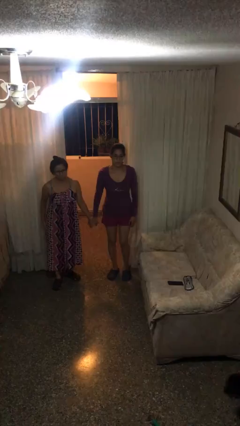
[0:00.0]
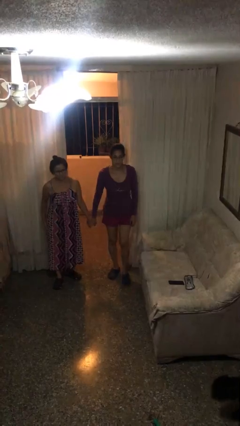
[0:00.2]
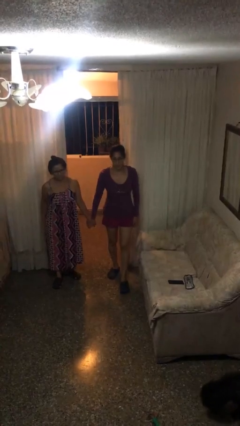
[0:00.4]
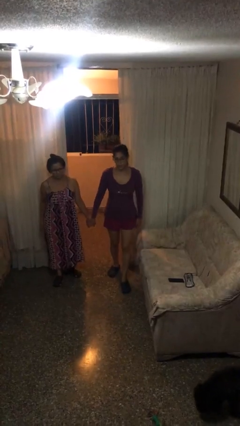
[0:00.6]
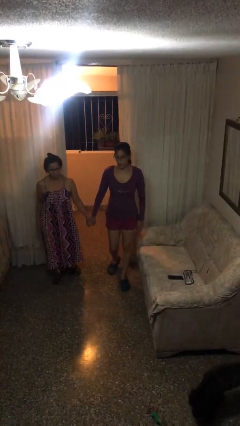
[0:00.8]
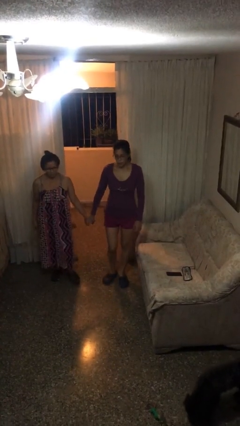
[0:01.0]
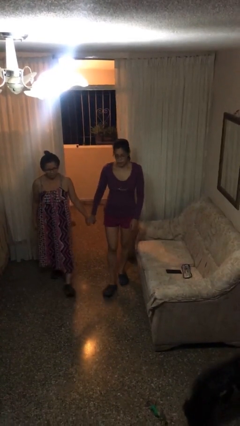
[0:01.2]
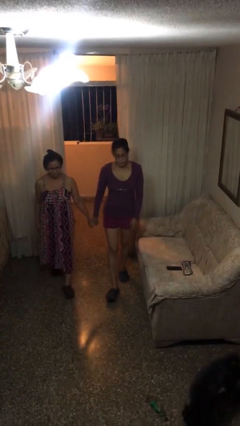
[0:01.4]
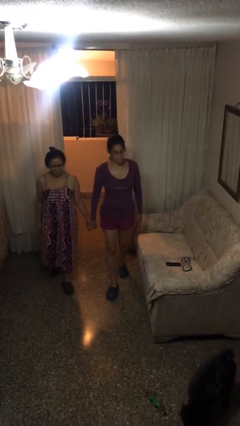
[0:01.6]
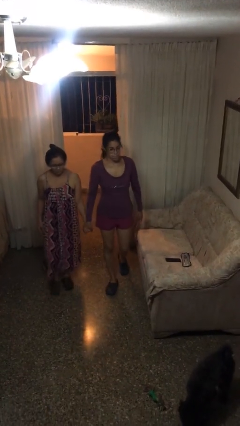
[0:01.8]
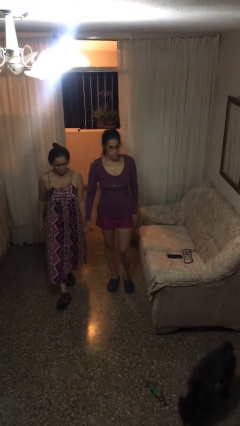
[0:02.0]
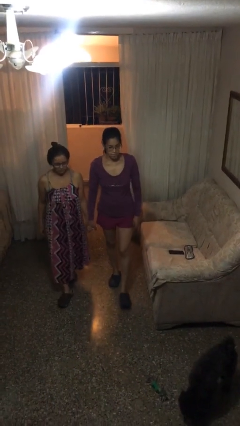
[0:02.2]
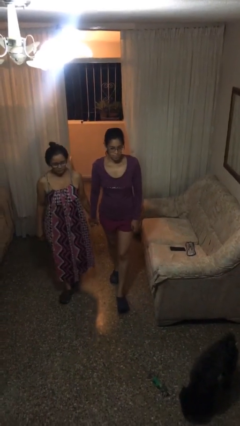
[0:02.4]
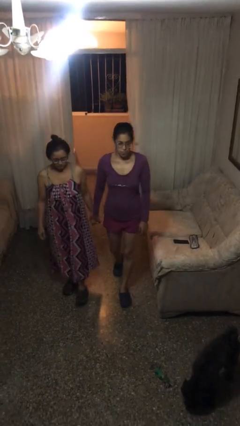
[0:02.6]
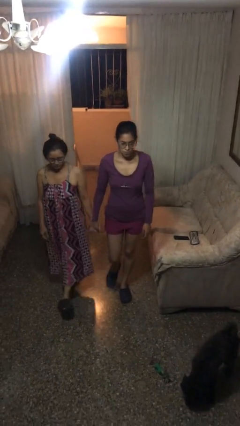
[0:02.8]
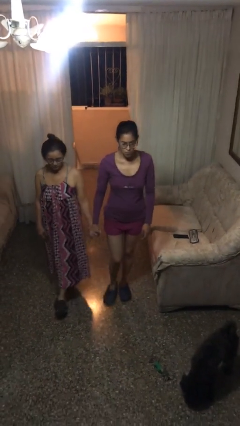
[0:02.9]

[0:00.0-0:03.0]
person holds hand

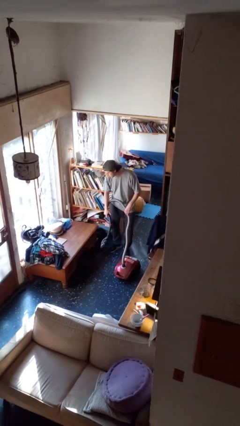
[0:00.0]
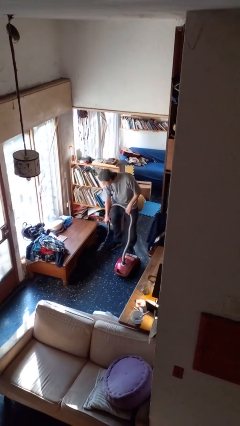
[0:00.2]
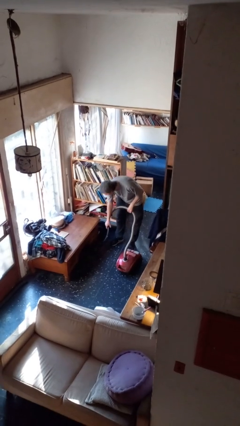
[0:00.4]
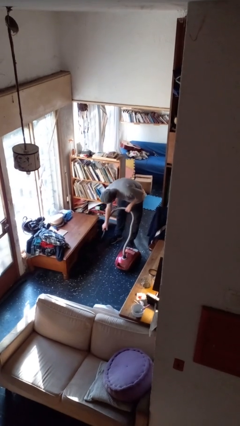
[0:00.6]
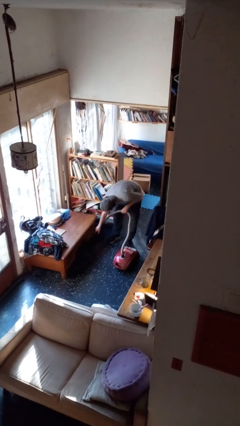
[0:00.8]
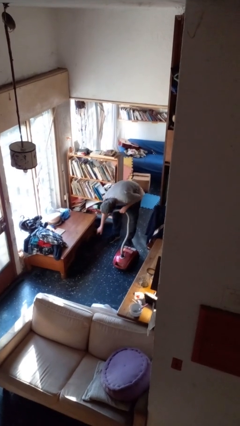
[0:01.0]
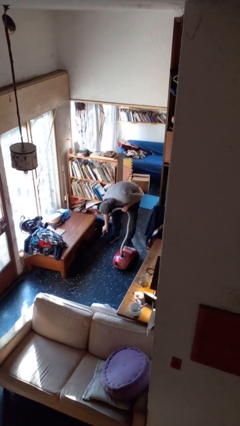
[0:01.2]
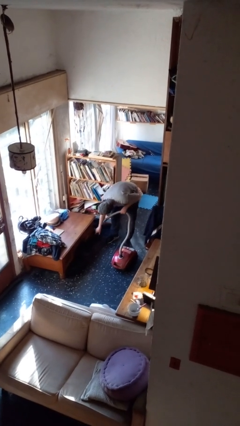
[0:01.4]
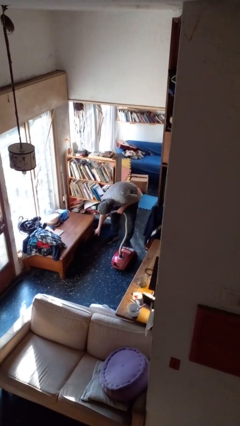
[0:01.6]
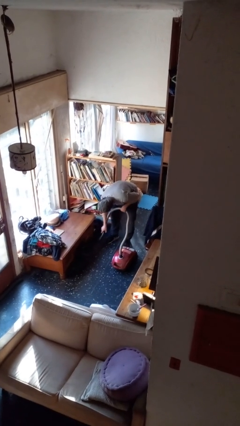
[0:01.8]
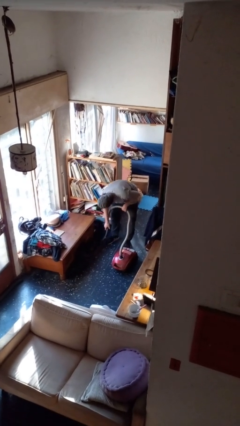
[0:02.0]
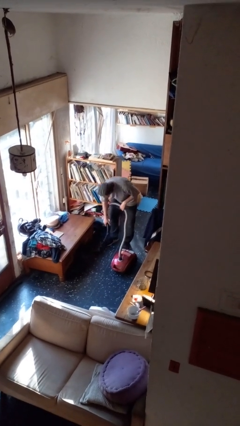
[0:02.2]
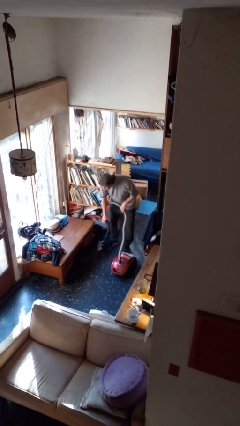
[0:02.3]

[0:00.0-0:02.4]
person vacuums carpet

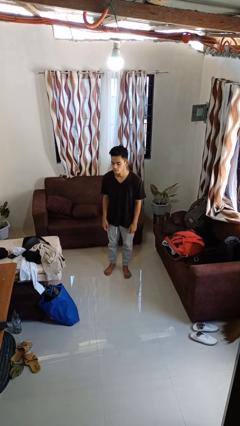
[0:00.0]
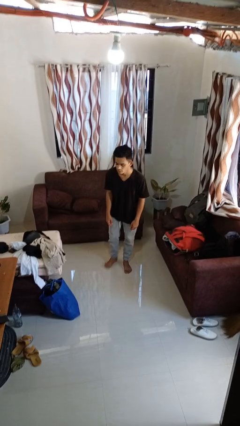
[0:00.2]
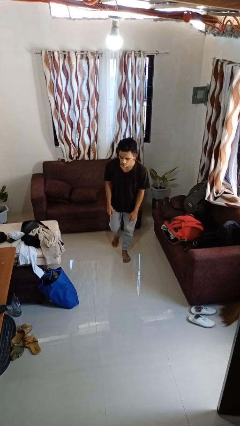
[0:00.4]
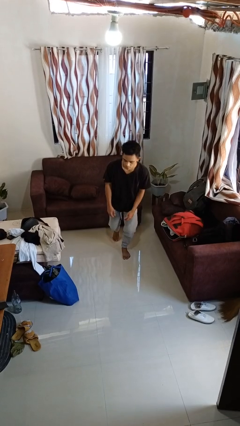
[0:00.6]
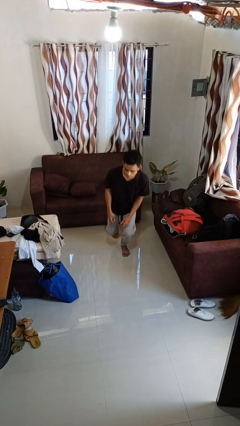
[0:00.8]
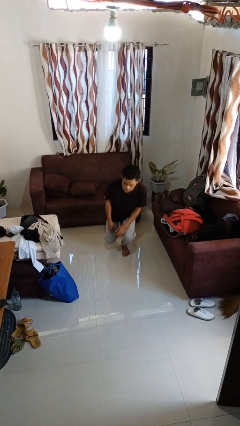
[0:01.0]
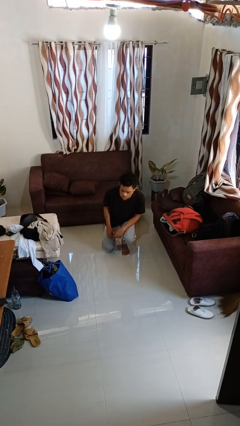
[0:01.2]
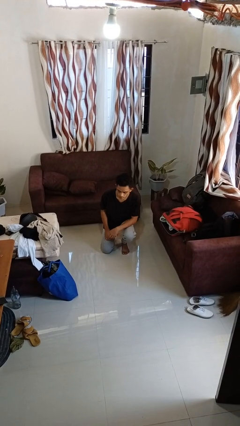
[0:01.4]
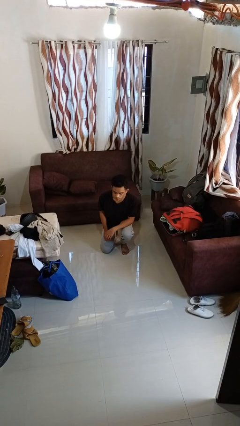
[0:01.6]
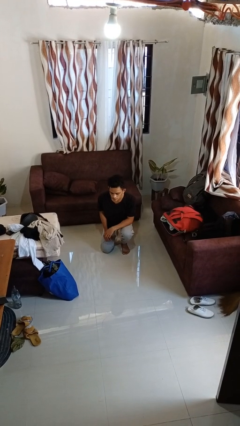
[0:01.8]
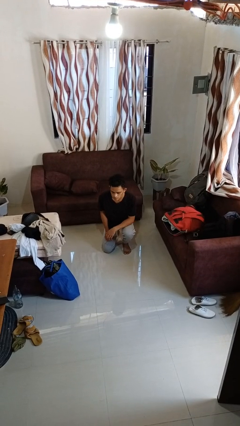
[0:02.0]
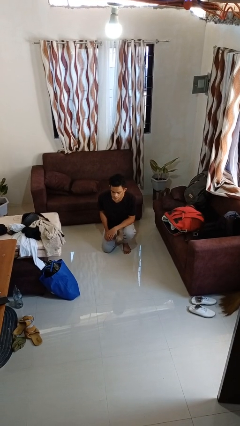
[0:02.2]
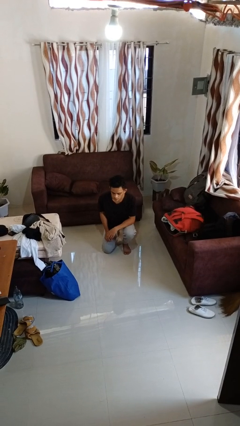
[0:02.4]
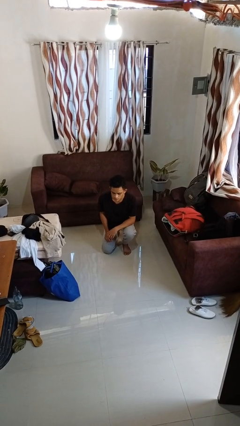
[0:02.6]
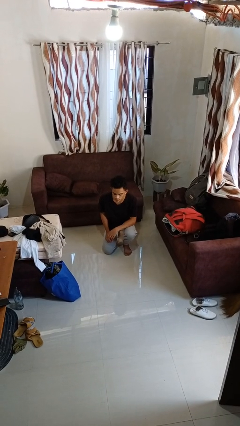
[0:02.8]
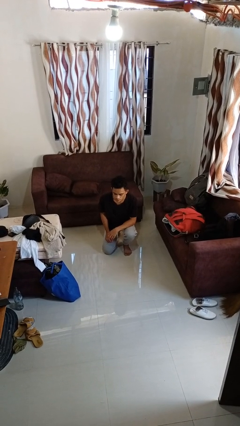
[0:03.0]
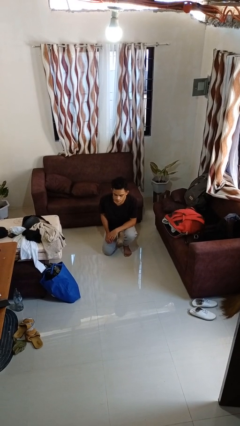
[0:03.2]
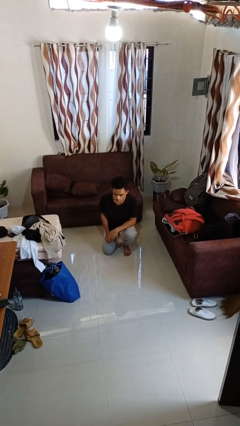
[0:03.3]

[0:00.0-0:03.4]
person kneels

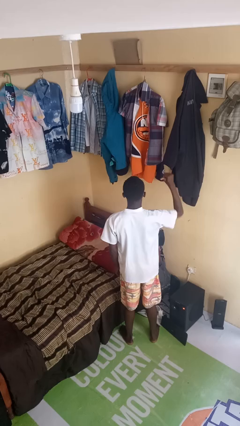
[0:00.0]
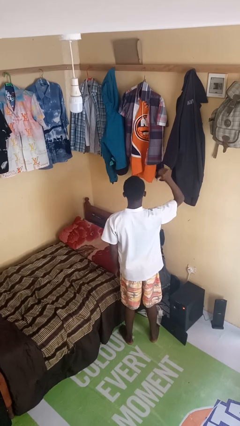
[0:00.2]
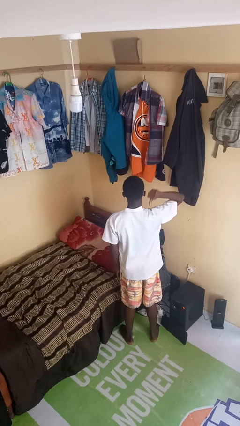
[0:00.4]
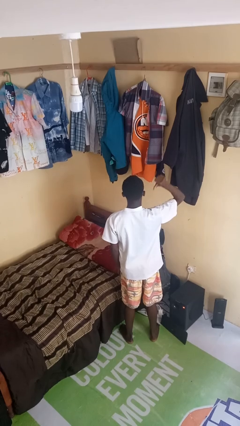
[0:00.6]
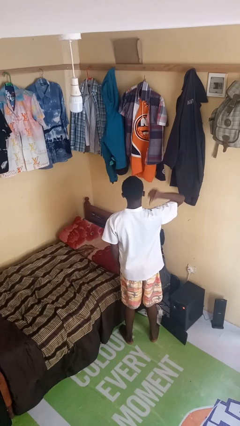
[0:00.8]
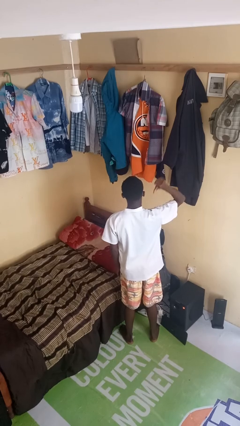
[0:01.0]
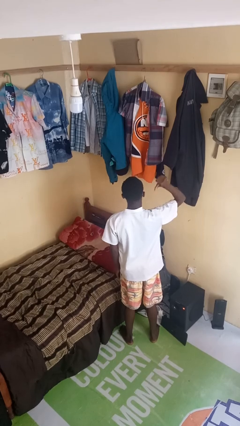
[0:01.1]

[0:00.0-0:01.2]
person gestures behind me

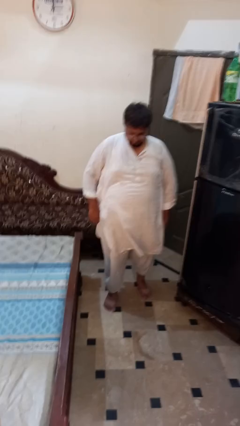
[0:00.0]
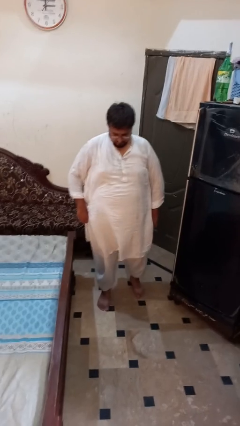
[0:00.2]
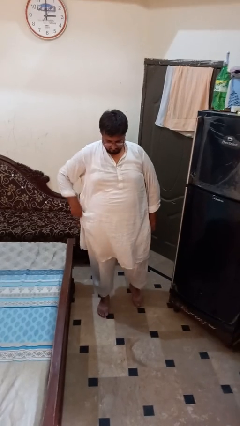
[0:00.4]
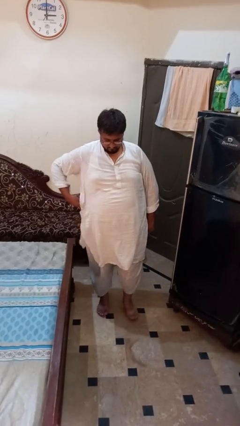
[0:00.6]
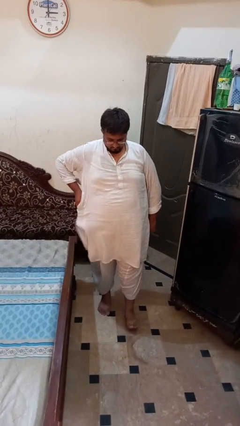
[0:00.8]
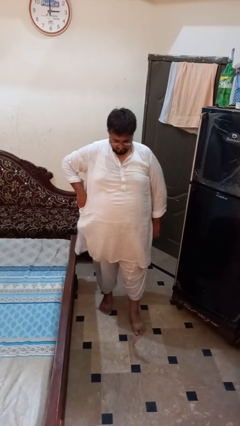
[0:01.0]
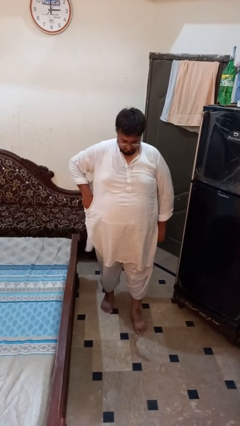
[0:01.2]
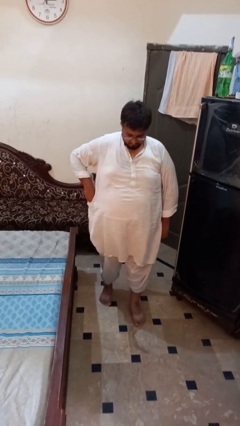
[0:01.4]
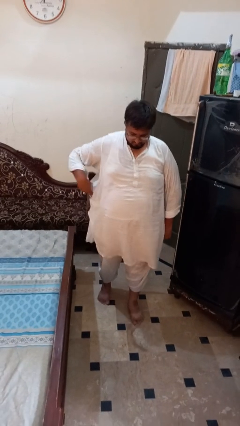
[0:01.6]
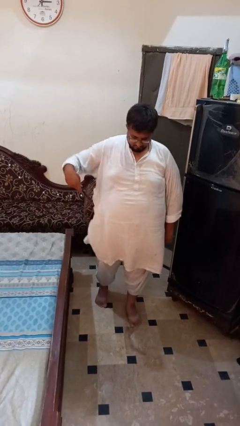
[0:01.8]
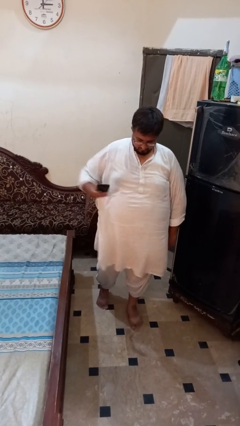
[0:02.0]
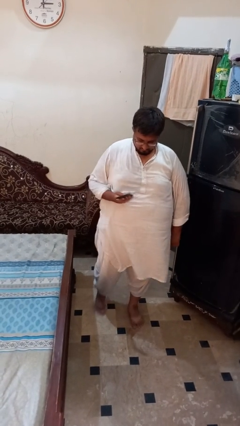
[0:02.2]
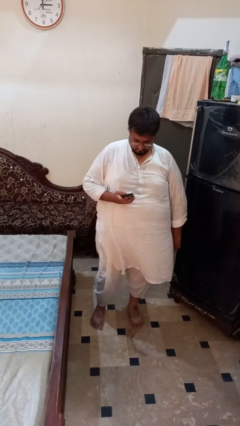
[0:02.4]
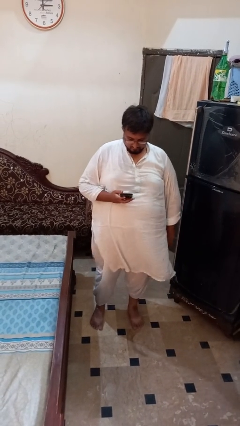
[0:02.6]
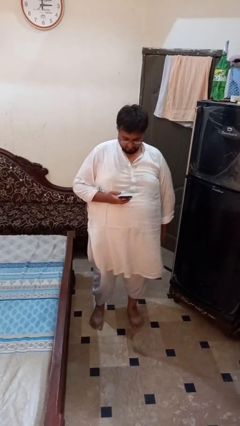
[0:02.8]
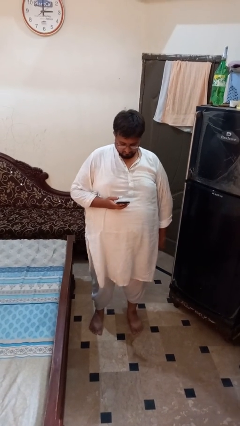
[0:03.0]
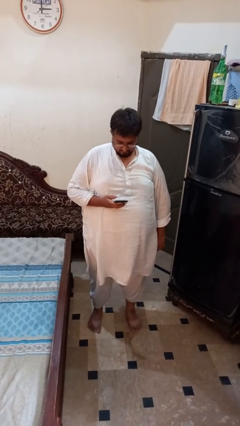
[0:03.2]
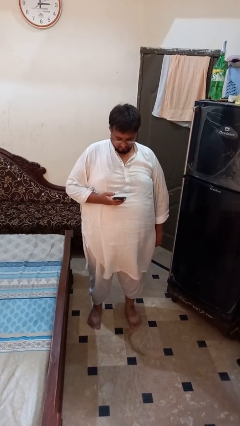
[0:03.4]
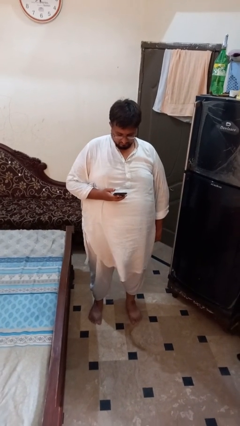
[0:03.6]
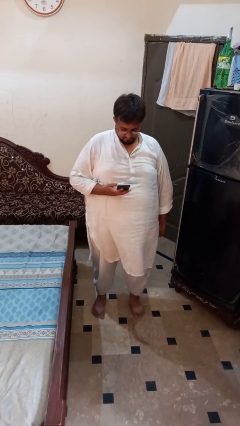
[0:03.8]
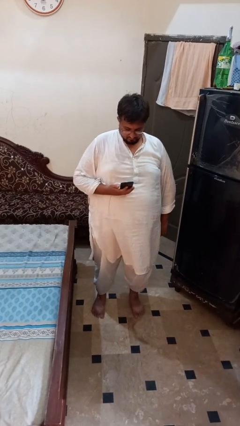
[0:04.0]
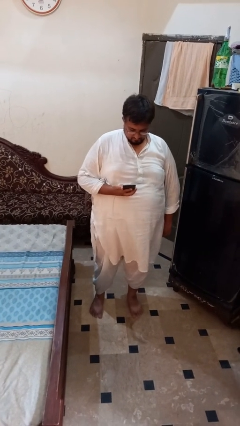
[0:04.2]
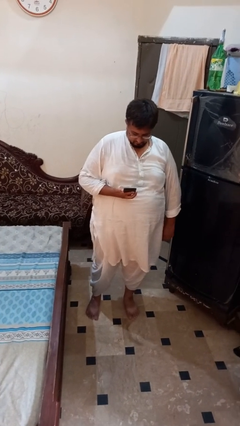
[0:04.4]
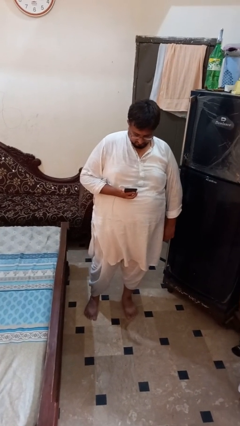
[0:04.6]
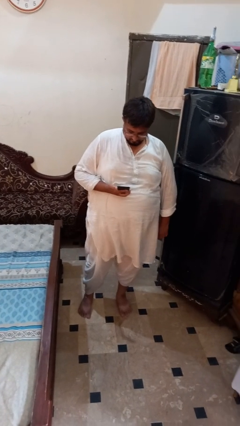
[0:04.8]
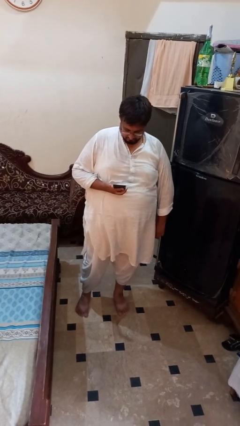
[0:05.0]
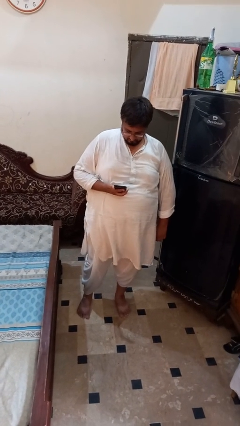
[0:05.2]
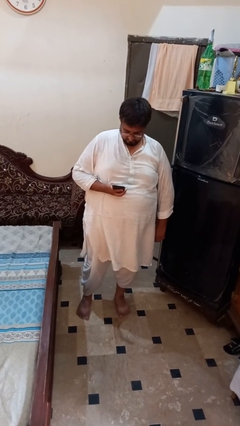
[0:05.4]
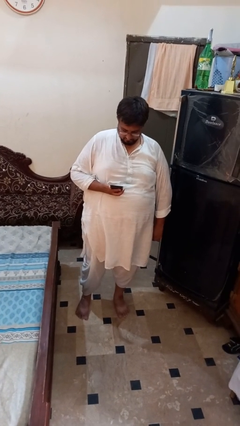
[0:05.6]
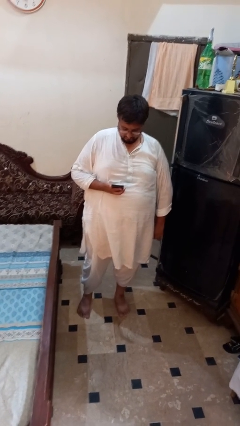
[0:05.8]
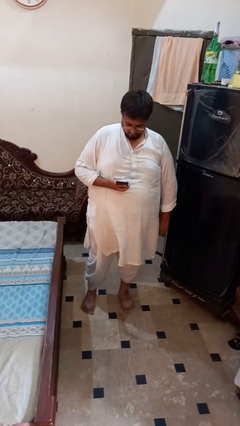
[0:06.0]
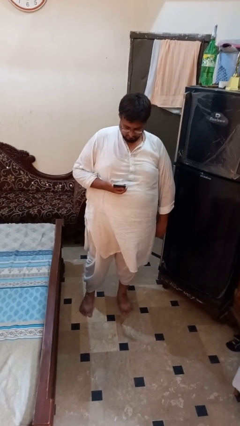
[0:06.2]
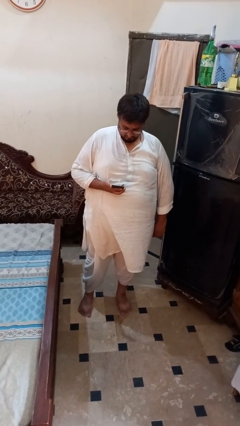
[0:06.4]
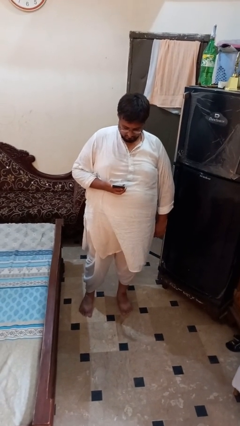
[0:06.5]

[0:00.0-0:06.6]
person takes phone from pocket

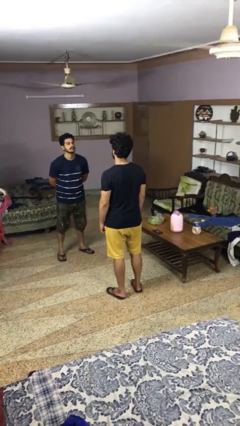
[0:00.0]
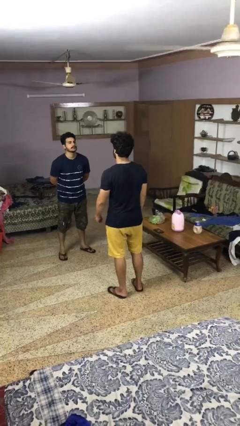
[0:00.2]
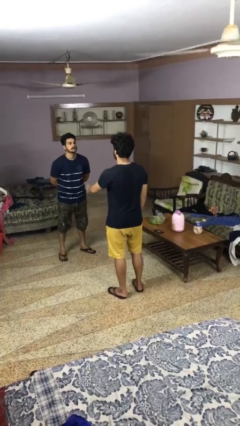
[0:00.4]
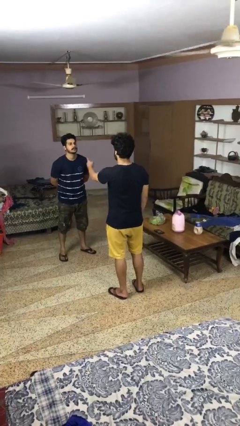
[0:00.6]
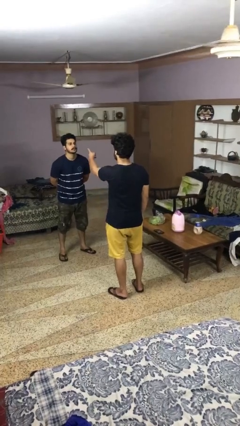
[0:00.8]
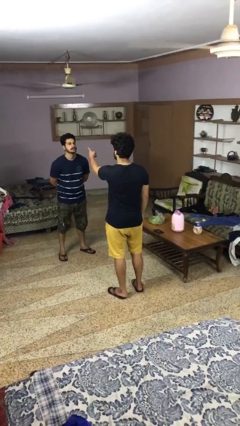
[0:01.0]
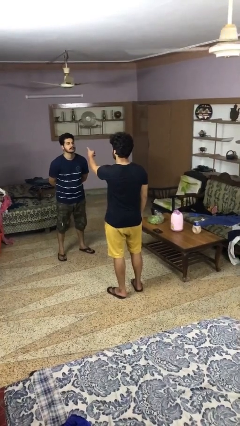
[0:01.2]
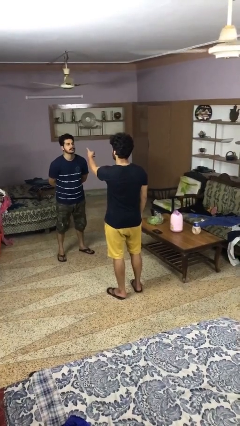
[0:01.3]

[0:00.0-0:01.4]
person points at person
